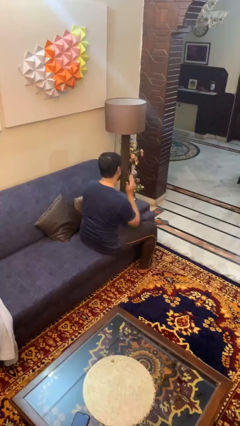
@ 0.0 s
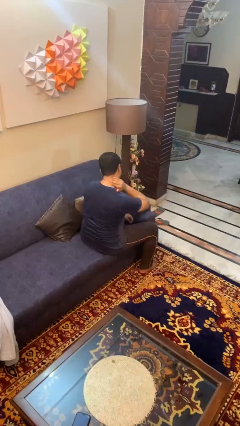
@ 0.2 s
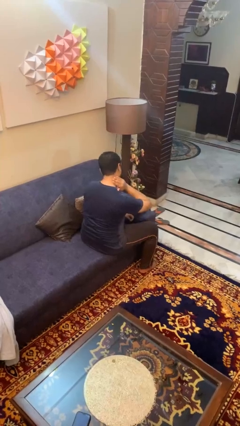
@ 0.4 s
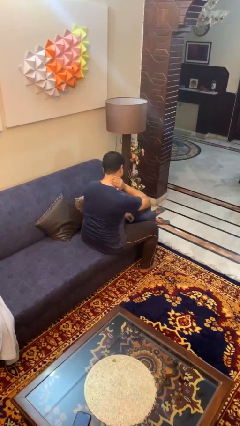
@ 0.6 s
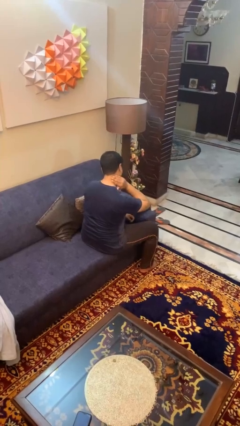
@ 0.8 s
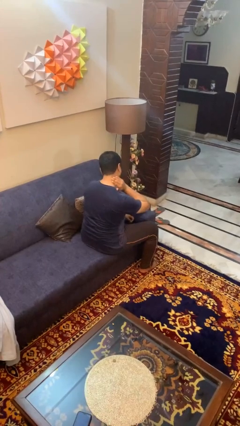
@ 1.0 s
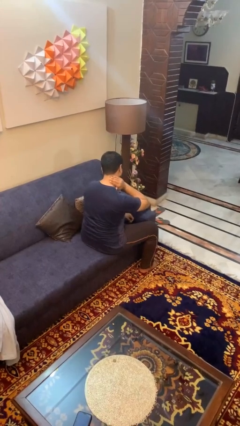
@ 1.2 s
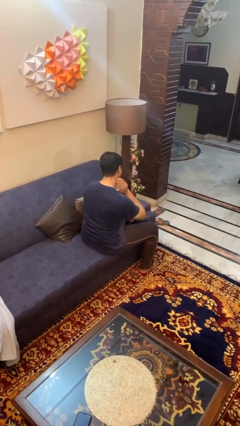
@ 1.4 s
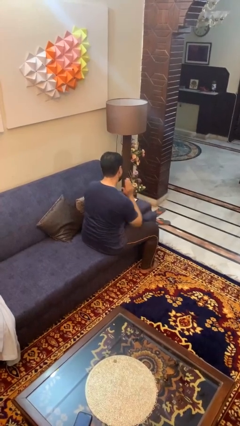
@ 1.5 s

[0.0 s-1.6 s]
person rubs neck

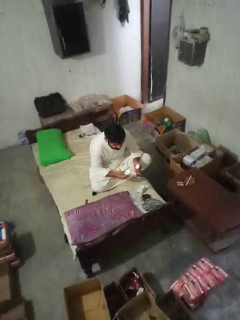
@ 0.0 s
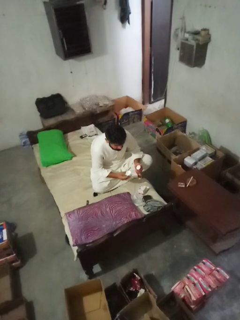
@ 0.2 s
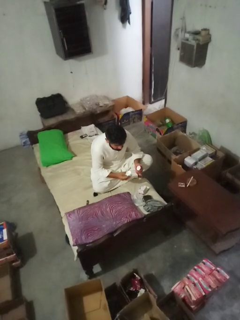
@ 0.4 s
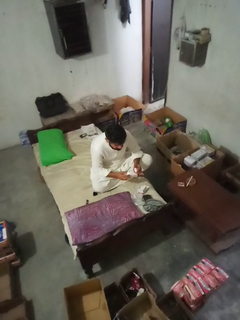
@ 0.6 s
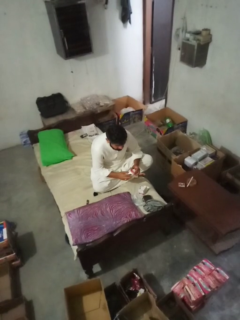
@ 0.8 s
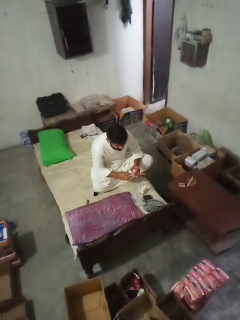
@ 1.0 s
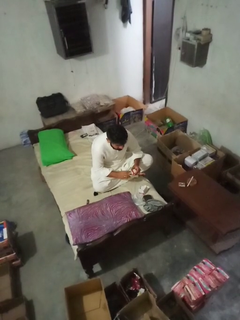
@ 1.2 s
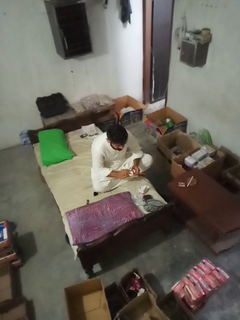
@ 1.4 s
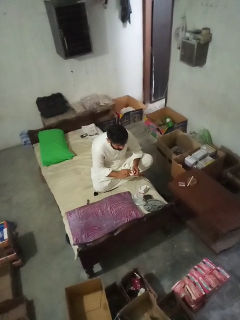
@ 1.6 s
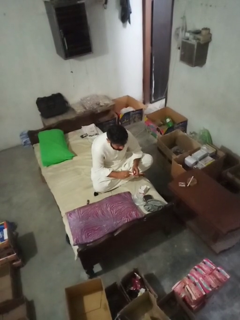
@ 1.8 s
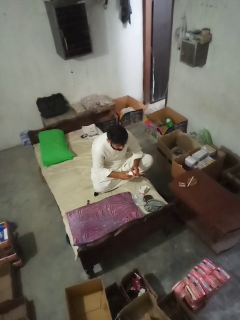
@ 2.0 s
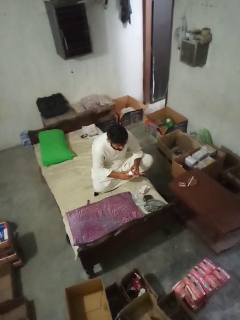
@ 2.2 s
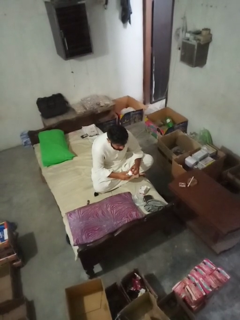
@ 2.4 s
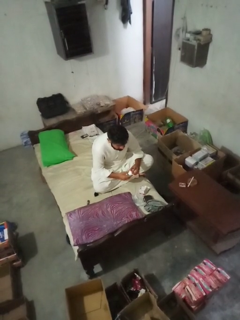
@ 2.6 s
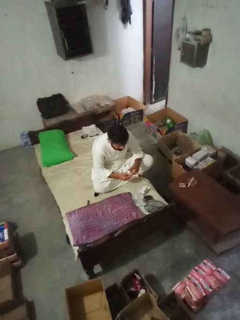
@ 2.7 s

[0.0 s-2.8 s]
person closes jar

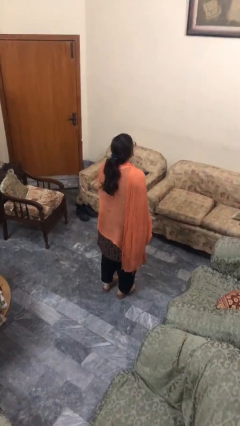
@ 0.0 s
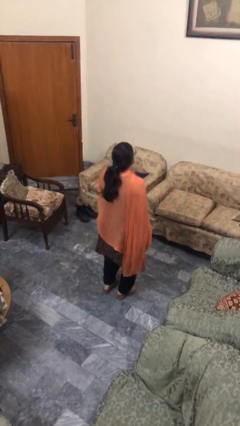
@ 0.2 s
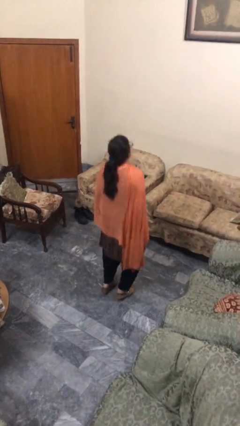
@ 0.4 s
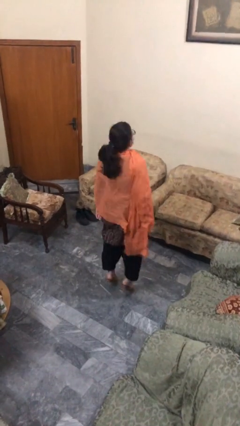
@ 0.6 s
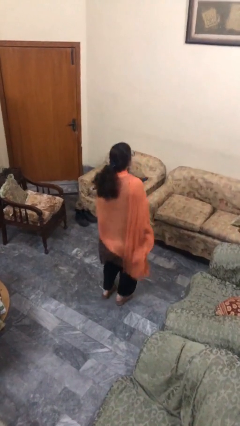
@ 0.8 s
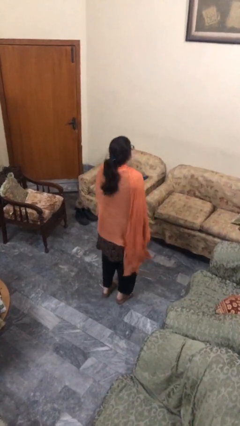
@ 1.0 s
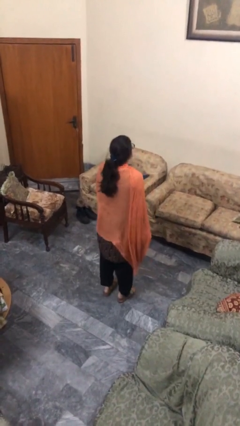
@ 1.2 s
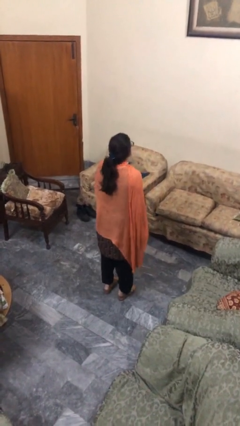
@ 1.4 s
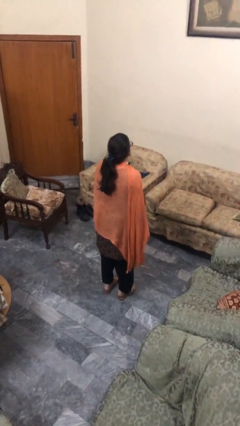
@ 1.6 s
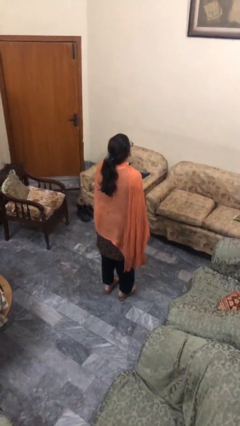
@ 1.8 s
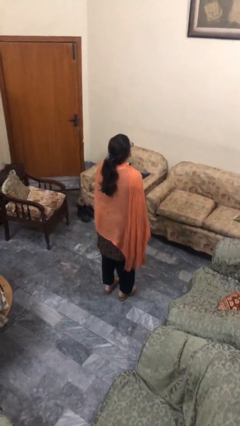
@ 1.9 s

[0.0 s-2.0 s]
person jumps

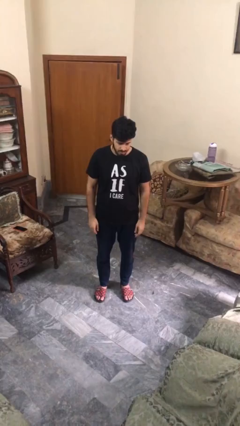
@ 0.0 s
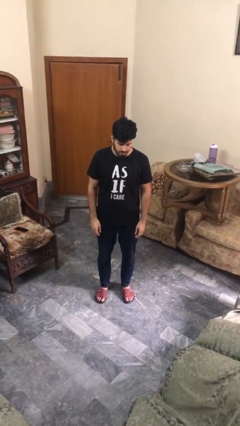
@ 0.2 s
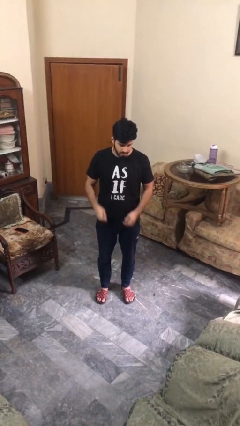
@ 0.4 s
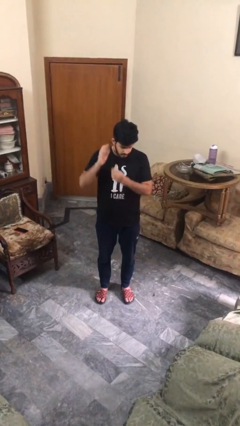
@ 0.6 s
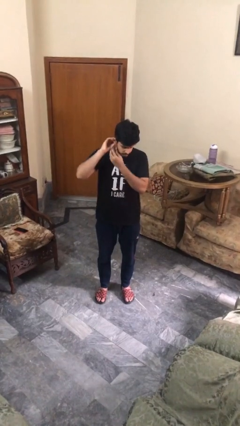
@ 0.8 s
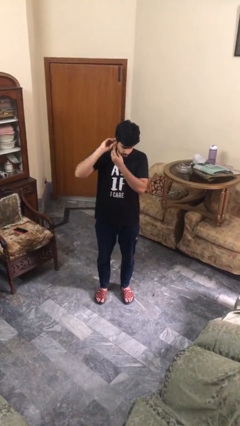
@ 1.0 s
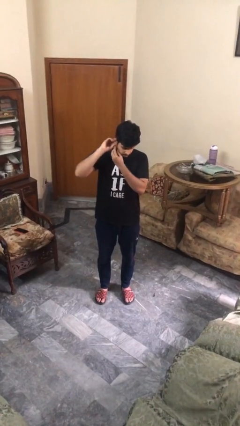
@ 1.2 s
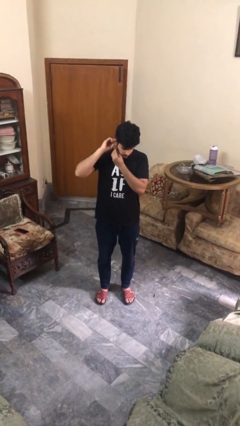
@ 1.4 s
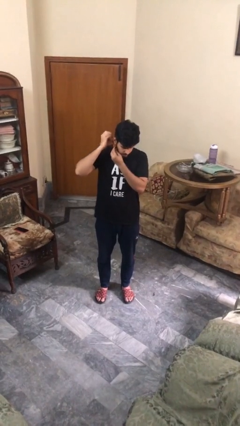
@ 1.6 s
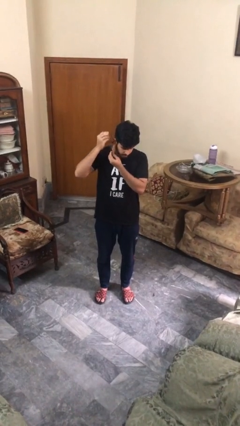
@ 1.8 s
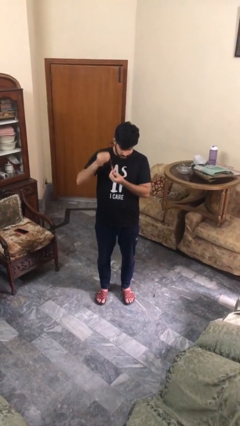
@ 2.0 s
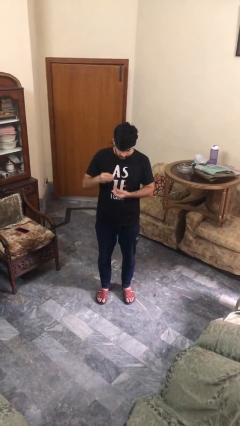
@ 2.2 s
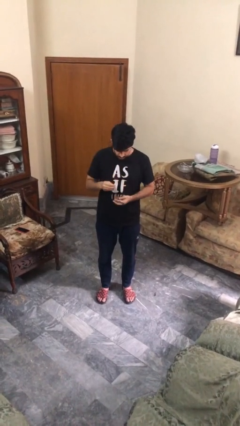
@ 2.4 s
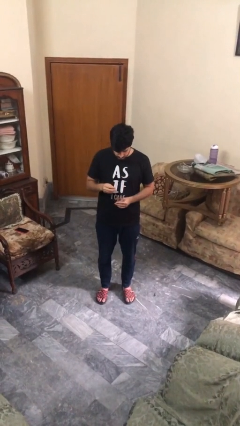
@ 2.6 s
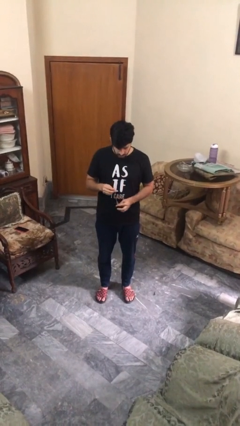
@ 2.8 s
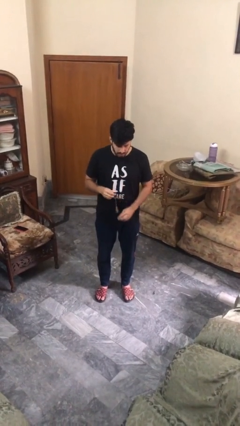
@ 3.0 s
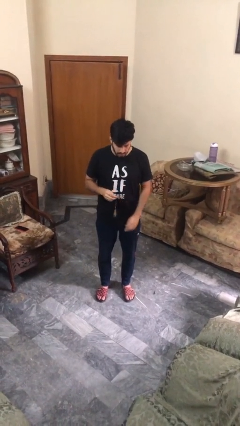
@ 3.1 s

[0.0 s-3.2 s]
person takes off earrings

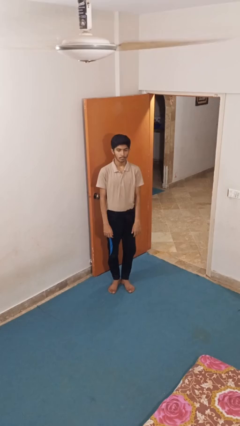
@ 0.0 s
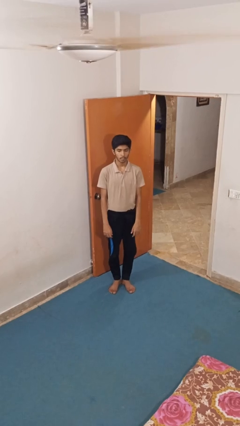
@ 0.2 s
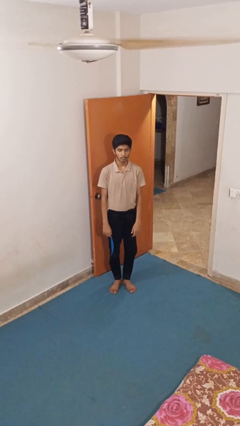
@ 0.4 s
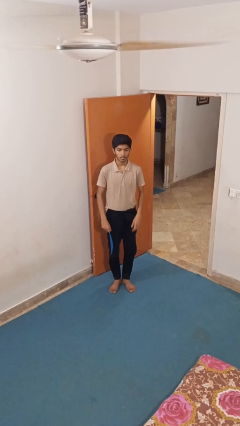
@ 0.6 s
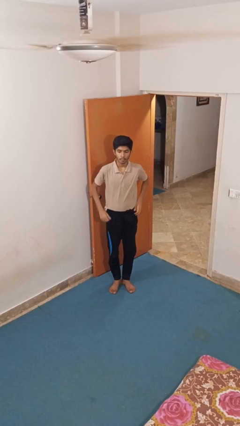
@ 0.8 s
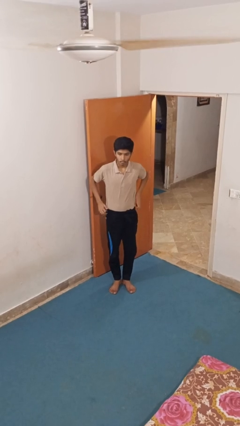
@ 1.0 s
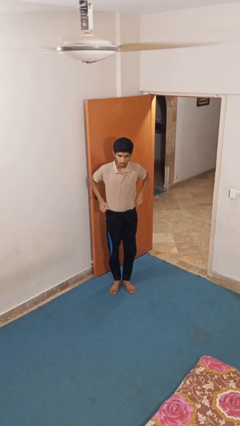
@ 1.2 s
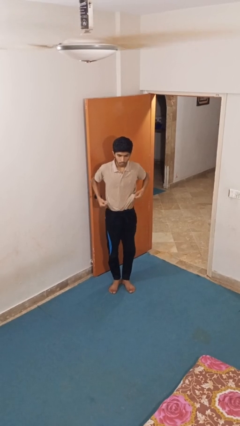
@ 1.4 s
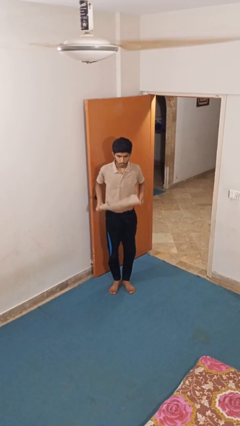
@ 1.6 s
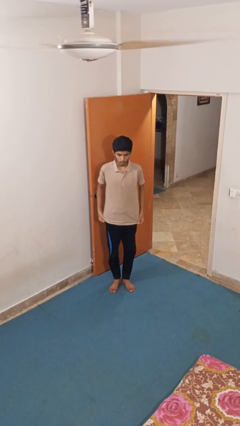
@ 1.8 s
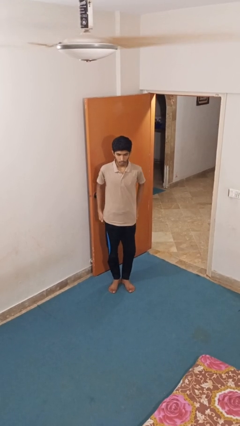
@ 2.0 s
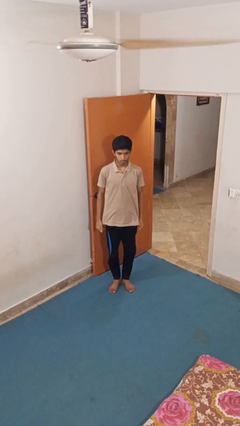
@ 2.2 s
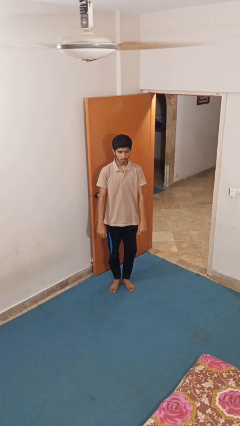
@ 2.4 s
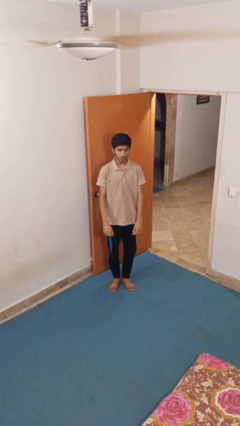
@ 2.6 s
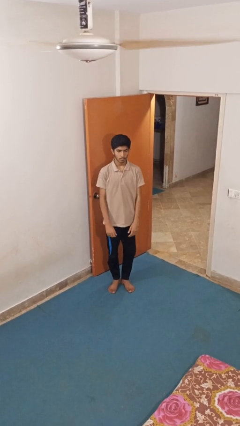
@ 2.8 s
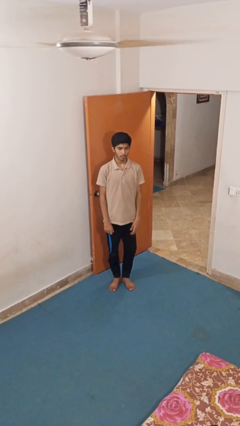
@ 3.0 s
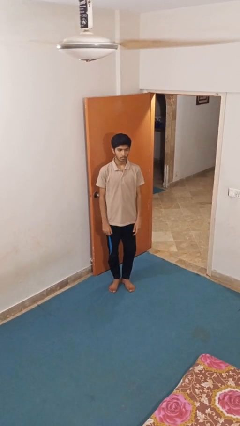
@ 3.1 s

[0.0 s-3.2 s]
person untucks shirt

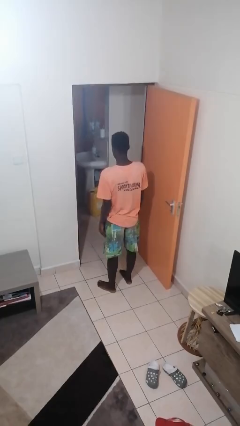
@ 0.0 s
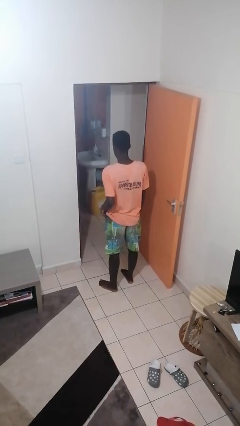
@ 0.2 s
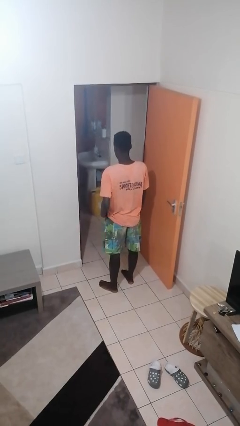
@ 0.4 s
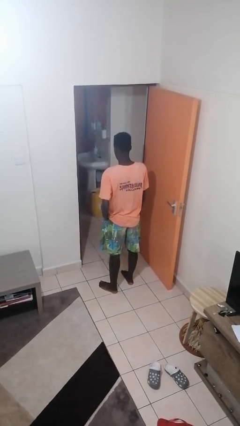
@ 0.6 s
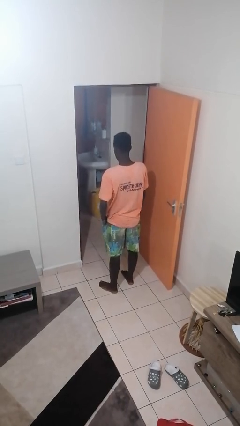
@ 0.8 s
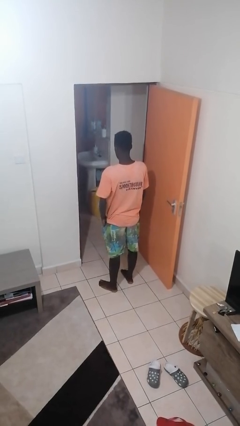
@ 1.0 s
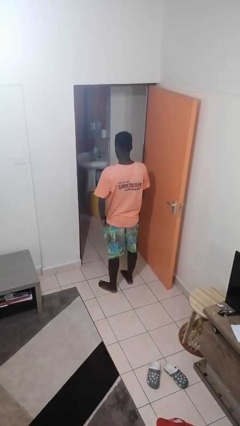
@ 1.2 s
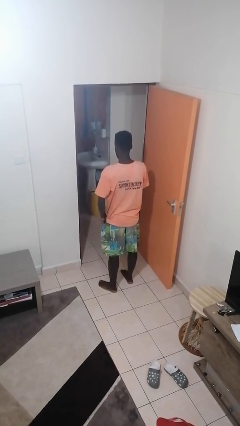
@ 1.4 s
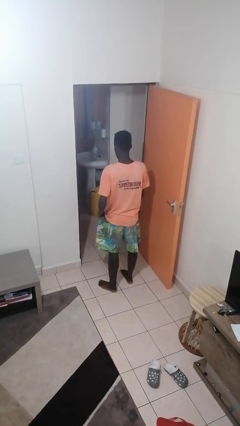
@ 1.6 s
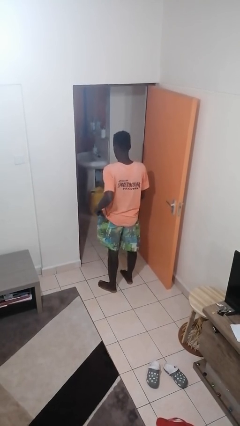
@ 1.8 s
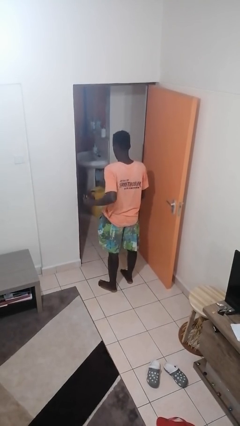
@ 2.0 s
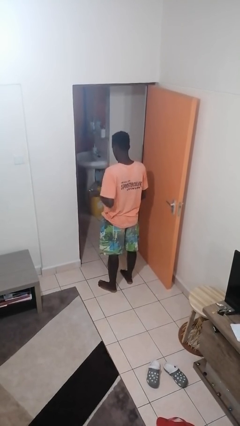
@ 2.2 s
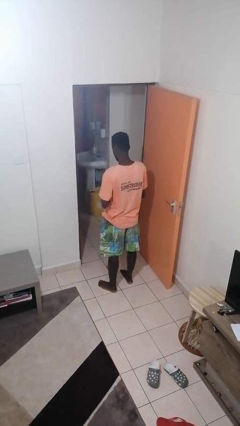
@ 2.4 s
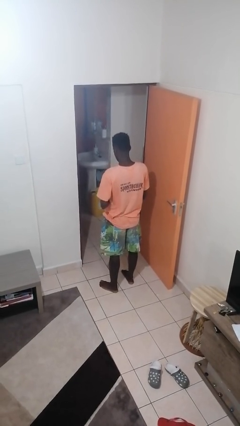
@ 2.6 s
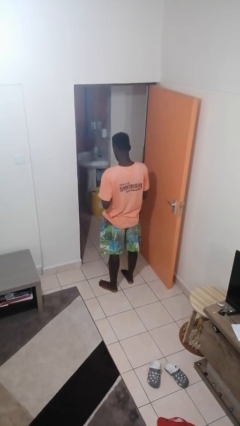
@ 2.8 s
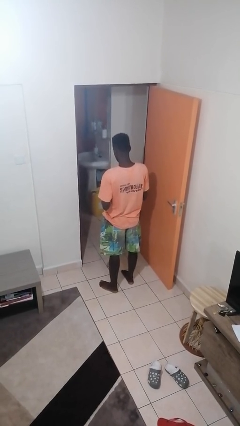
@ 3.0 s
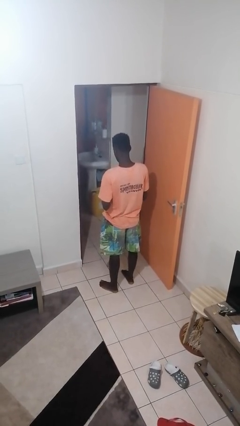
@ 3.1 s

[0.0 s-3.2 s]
person takes phone from pocket

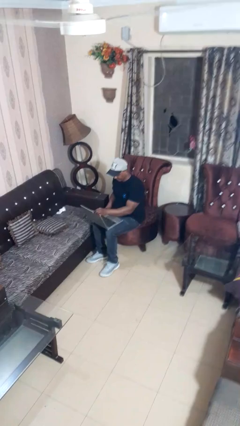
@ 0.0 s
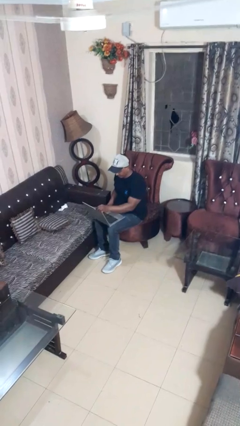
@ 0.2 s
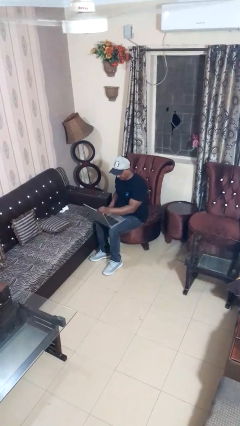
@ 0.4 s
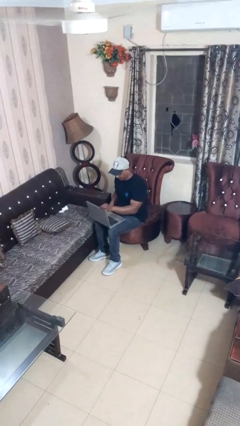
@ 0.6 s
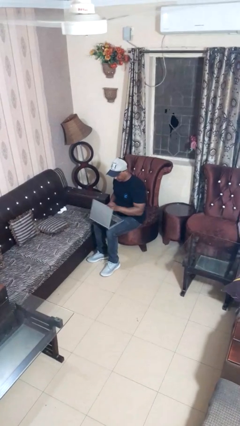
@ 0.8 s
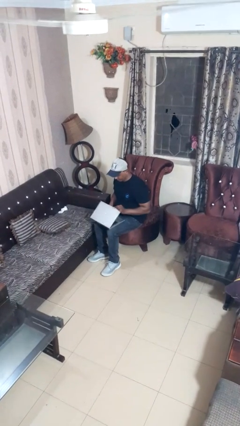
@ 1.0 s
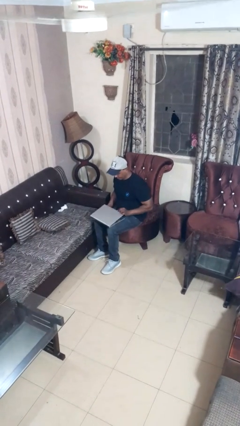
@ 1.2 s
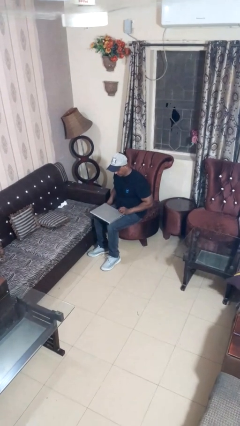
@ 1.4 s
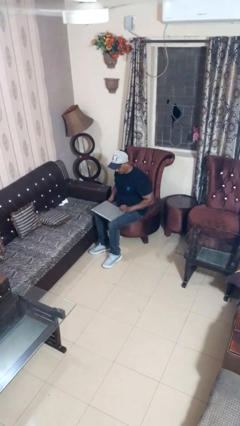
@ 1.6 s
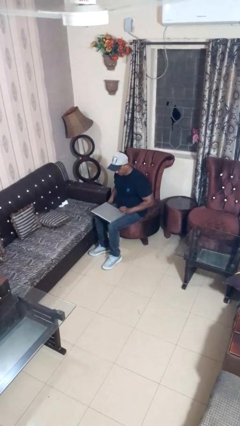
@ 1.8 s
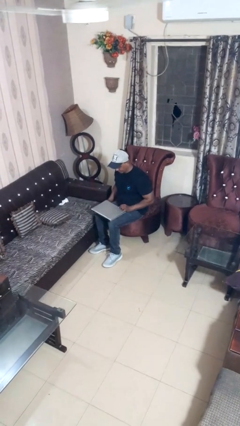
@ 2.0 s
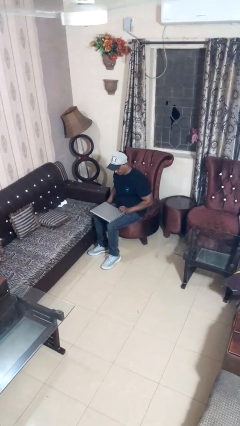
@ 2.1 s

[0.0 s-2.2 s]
person closes laptop
